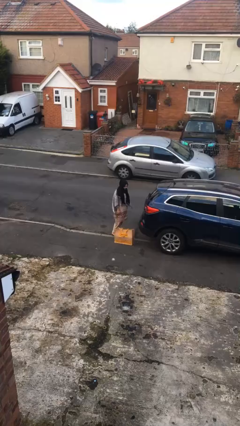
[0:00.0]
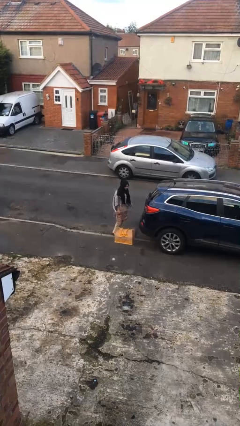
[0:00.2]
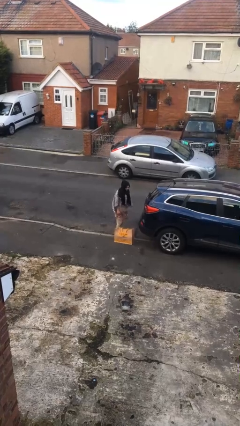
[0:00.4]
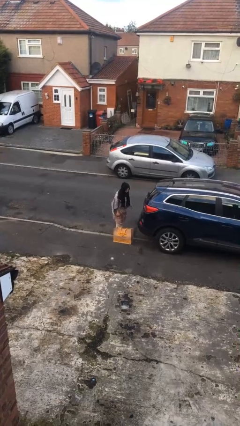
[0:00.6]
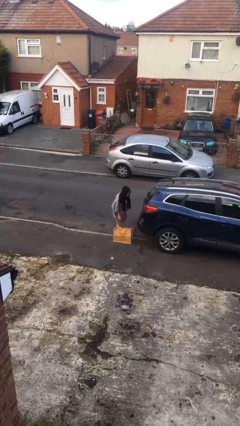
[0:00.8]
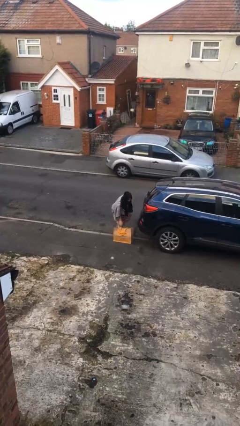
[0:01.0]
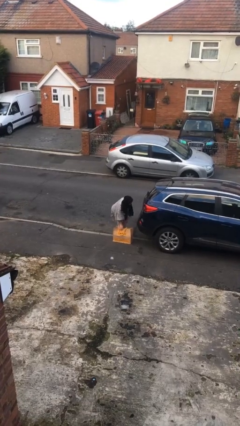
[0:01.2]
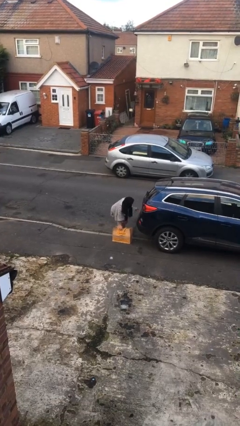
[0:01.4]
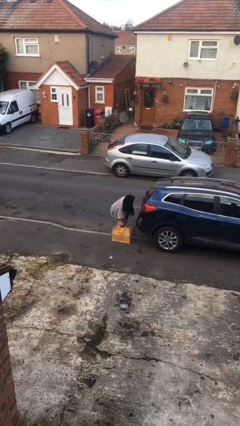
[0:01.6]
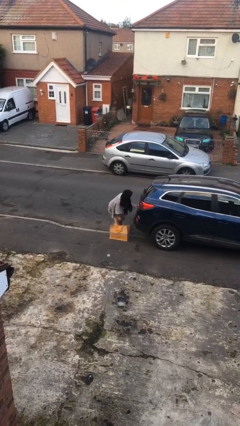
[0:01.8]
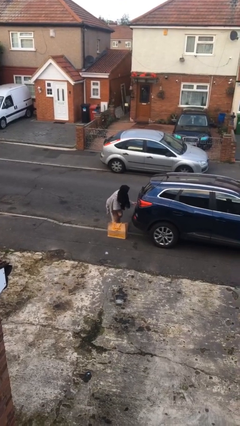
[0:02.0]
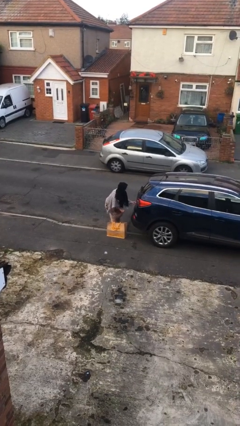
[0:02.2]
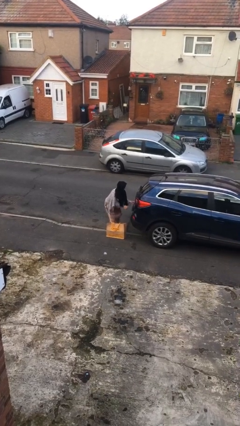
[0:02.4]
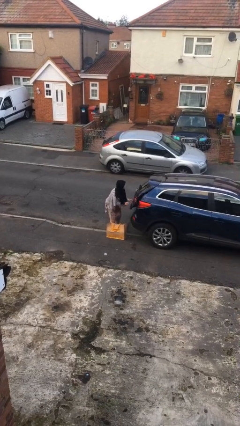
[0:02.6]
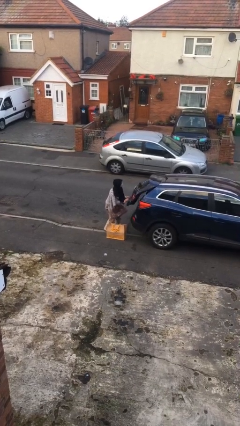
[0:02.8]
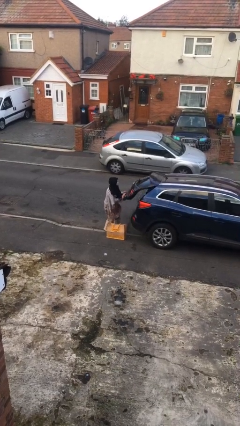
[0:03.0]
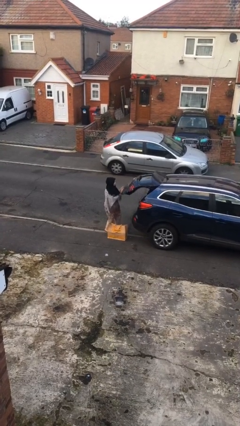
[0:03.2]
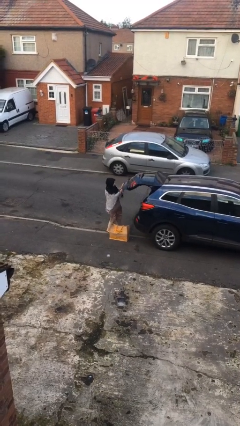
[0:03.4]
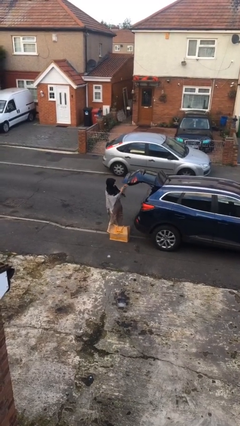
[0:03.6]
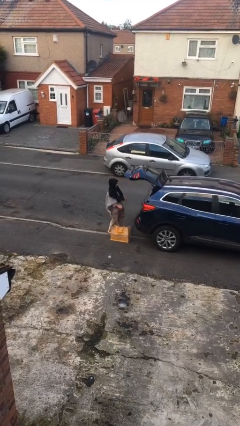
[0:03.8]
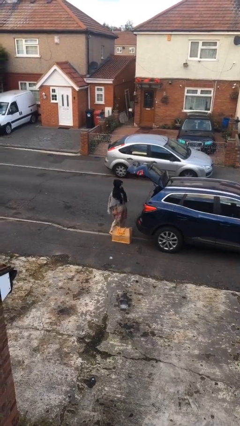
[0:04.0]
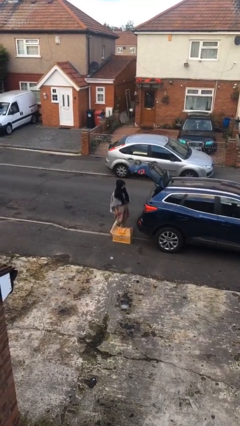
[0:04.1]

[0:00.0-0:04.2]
person opens car trunk

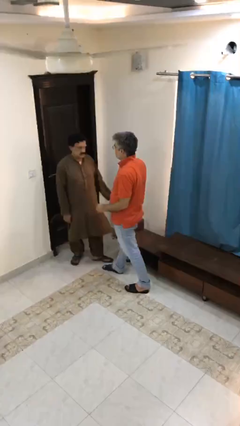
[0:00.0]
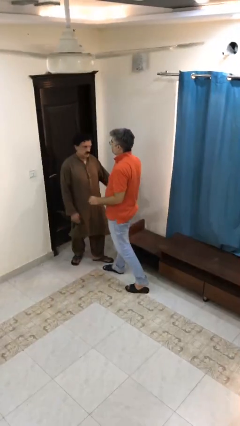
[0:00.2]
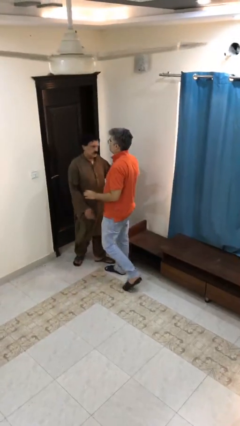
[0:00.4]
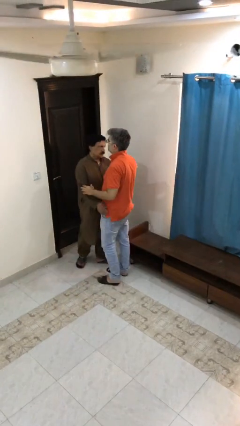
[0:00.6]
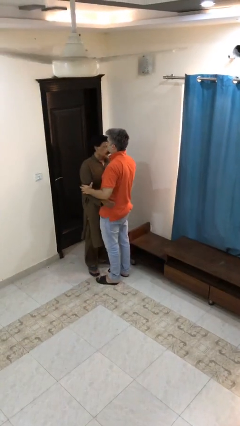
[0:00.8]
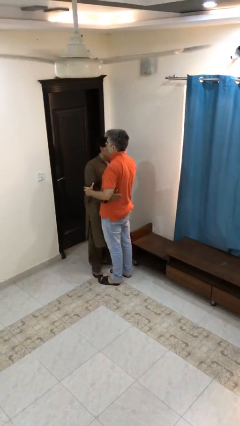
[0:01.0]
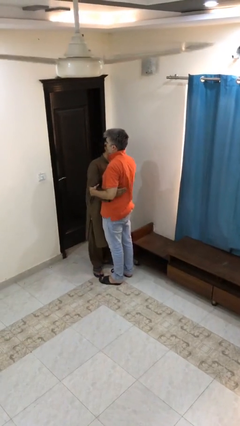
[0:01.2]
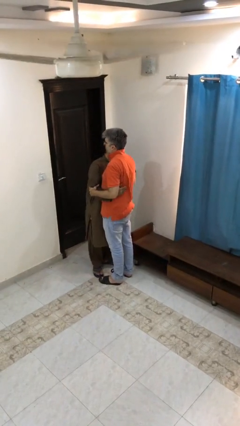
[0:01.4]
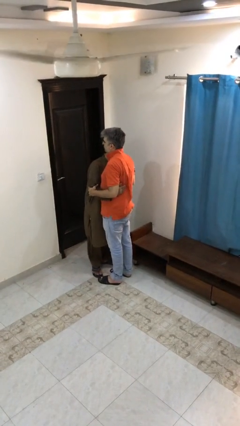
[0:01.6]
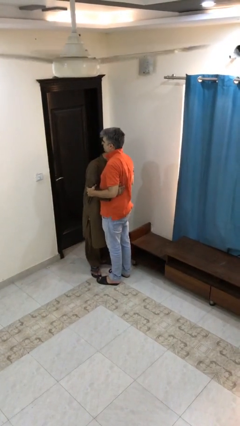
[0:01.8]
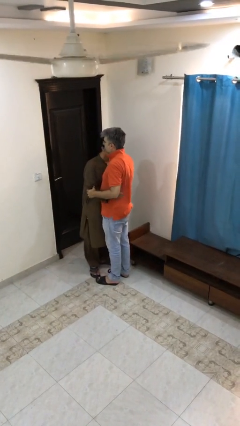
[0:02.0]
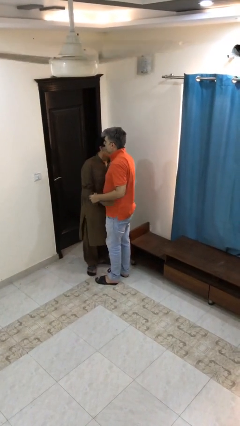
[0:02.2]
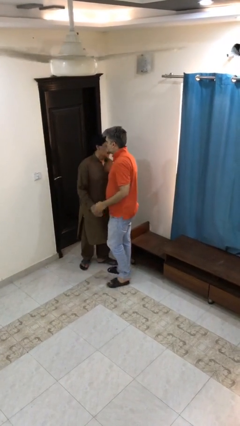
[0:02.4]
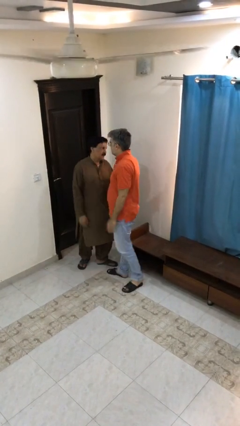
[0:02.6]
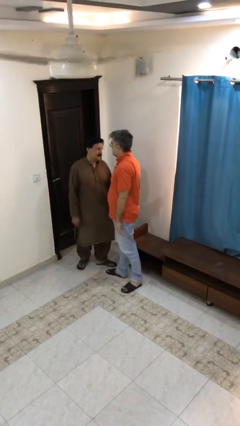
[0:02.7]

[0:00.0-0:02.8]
person embraces person

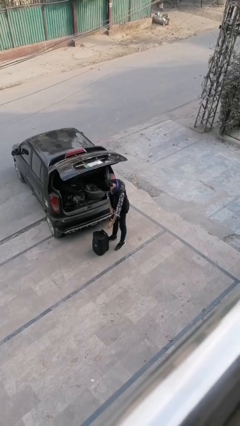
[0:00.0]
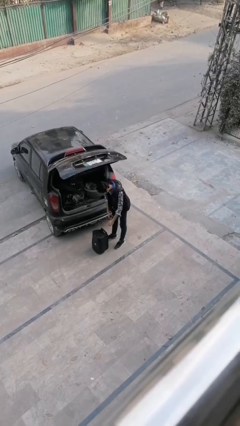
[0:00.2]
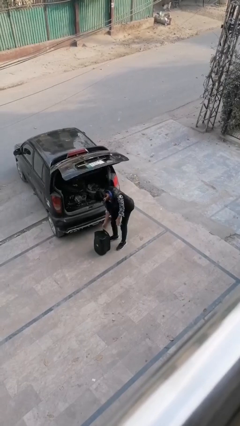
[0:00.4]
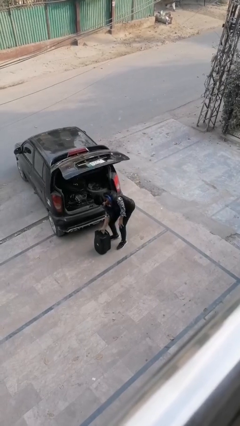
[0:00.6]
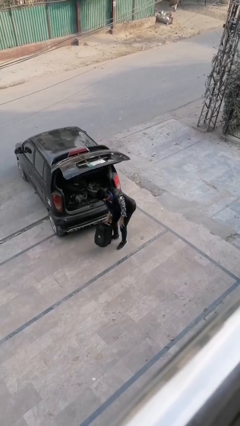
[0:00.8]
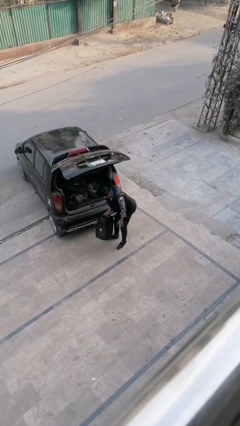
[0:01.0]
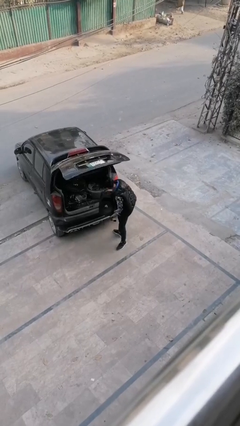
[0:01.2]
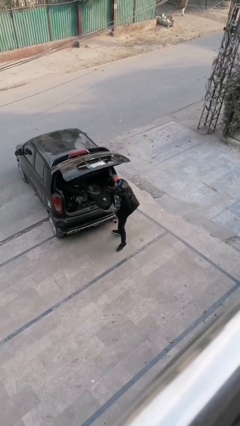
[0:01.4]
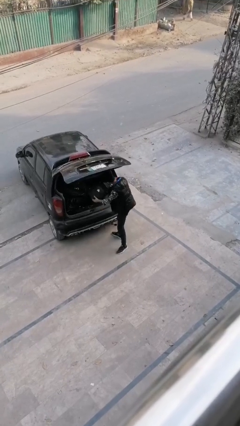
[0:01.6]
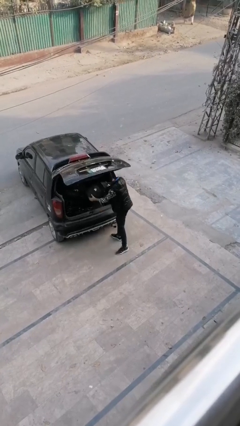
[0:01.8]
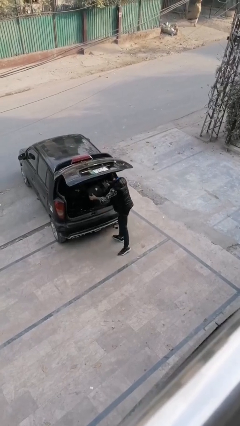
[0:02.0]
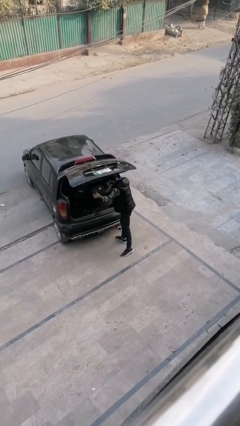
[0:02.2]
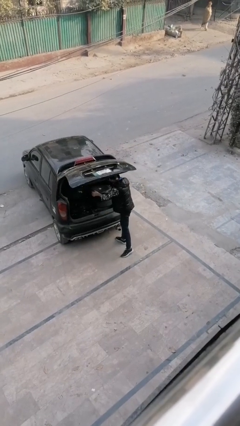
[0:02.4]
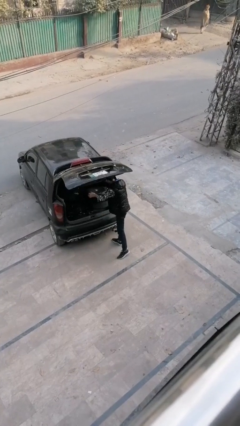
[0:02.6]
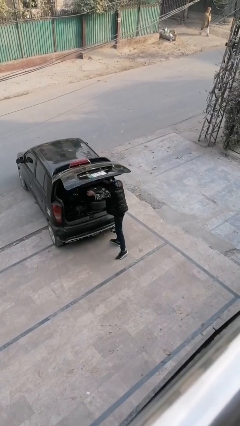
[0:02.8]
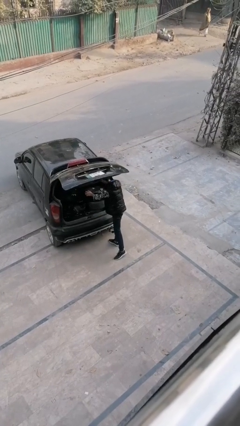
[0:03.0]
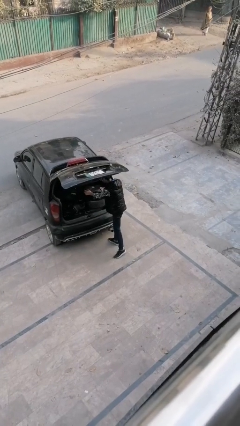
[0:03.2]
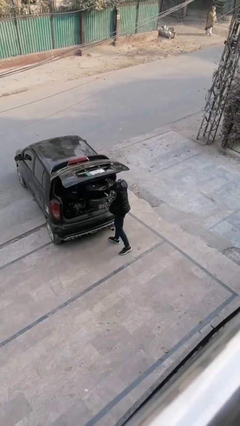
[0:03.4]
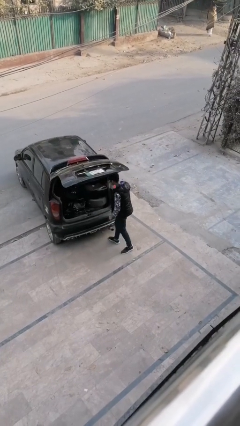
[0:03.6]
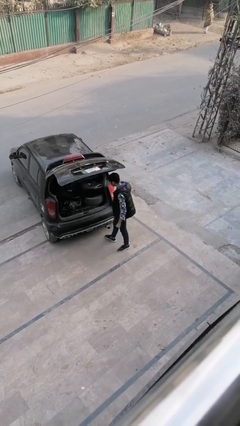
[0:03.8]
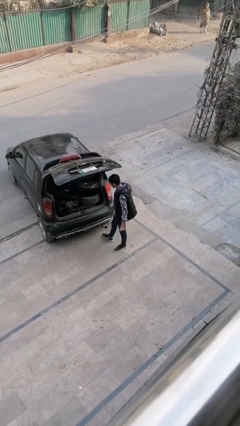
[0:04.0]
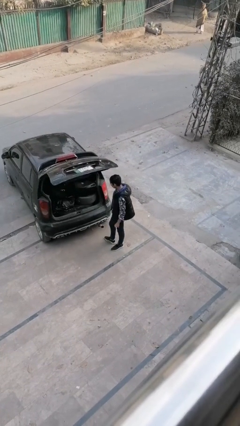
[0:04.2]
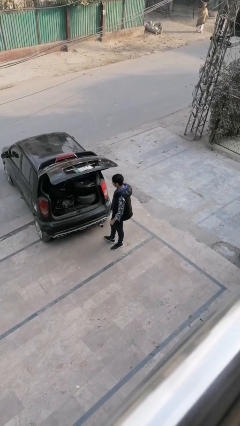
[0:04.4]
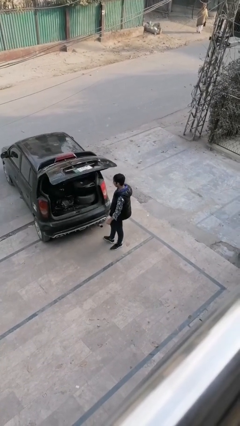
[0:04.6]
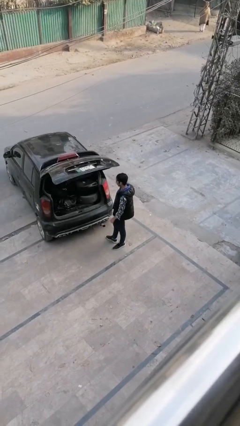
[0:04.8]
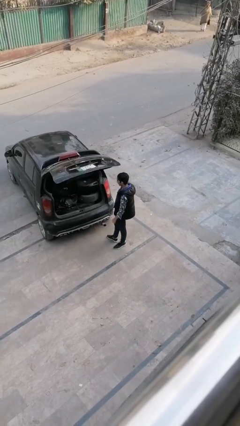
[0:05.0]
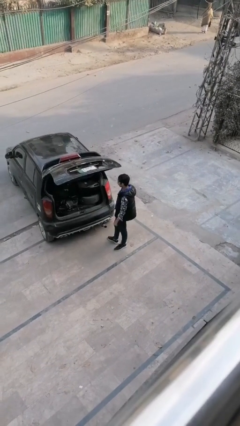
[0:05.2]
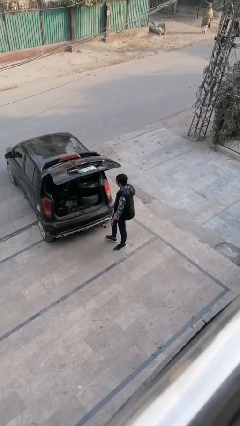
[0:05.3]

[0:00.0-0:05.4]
person loads car

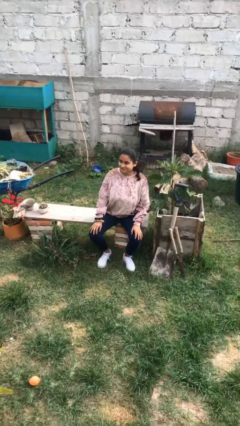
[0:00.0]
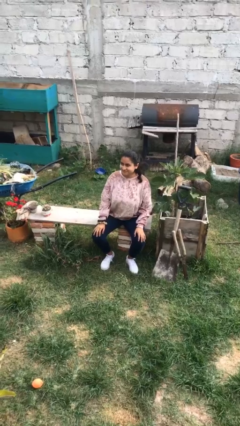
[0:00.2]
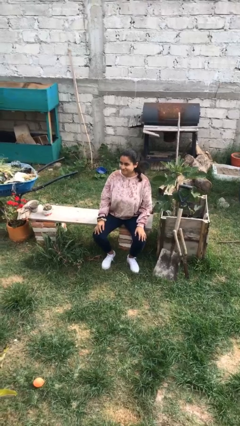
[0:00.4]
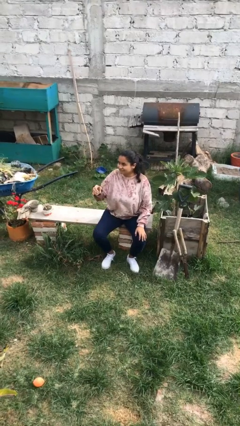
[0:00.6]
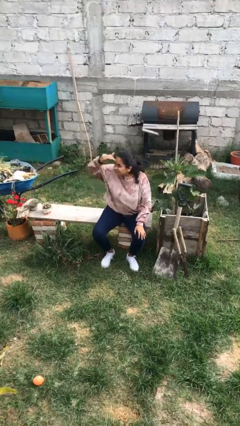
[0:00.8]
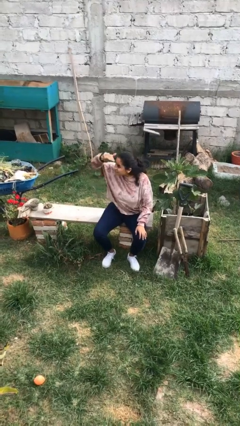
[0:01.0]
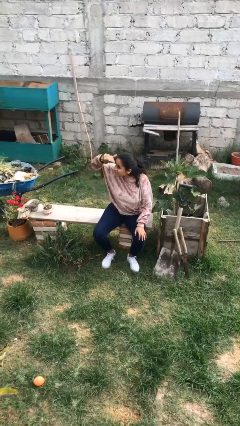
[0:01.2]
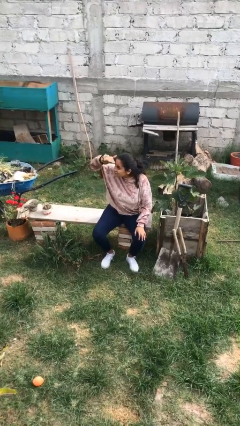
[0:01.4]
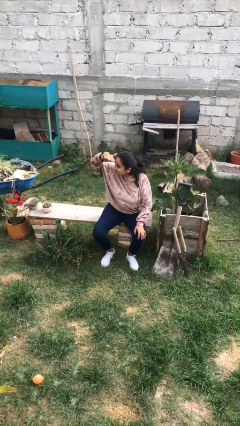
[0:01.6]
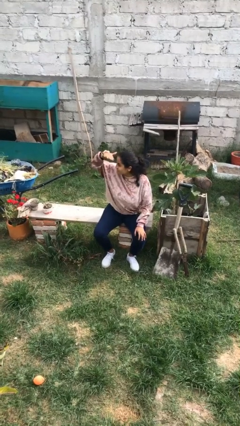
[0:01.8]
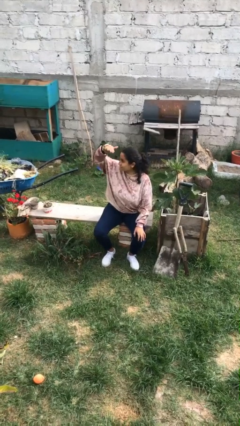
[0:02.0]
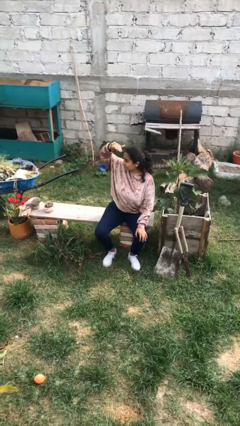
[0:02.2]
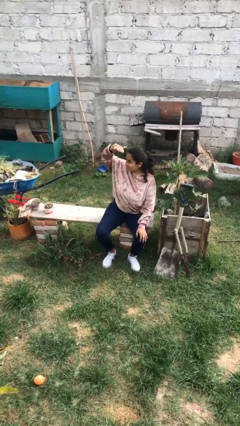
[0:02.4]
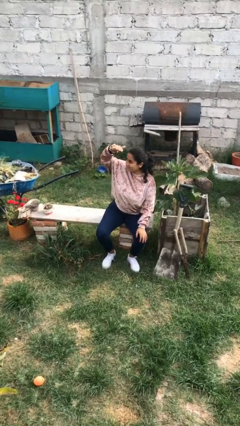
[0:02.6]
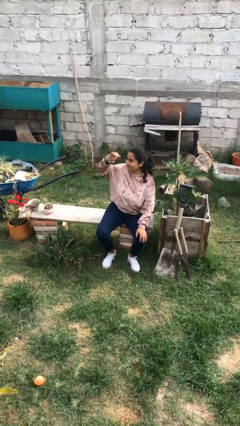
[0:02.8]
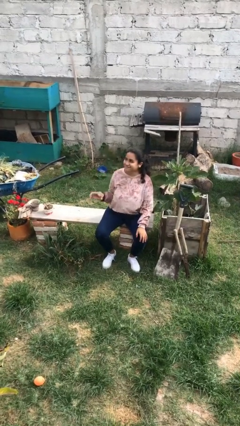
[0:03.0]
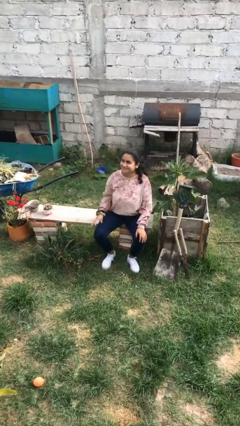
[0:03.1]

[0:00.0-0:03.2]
person shades eyes

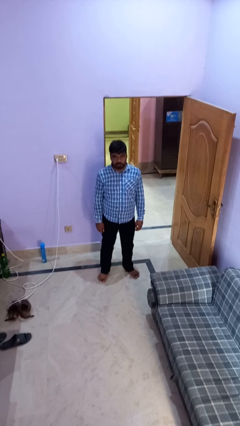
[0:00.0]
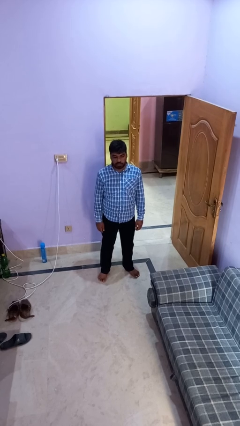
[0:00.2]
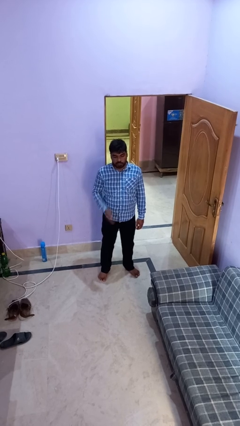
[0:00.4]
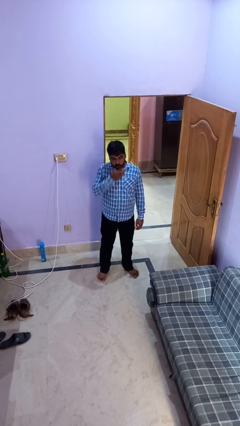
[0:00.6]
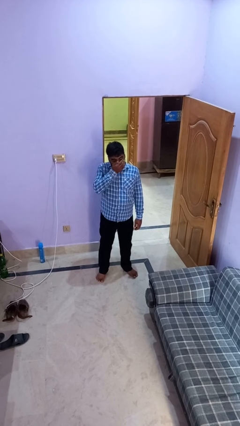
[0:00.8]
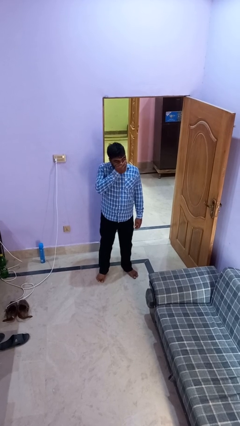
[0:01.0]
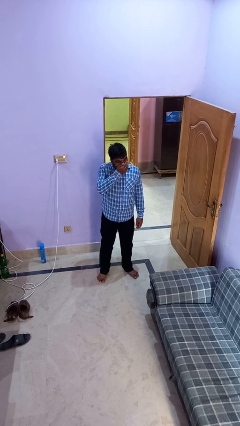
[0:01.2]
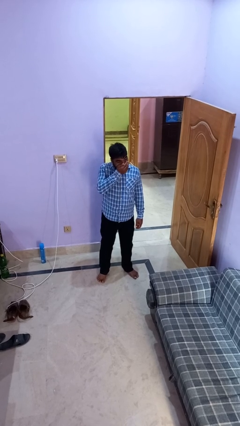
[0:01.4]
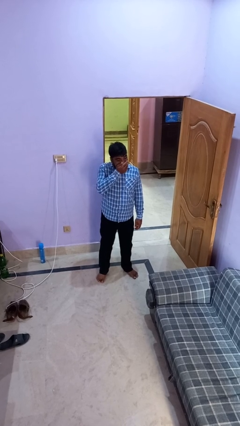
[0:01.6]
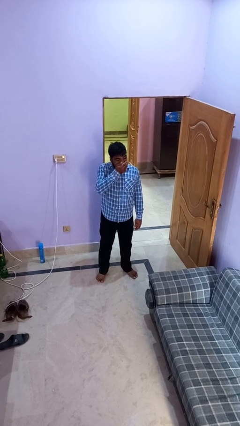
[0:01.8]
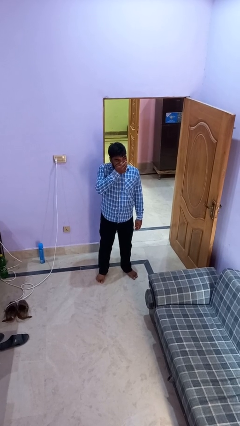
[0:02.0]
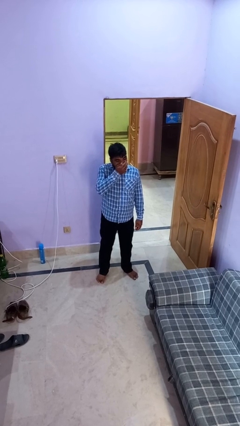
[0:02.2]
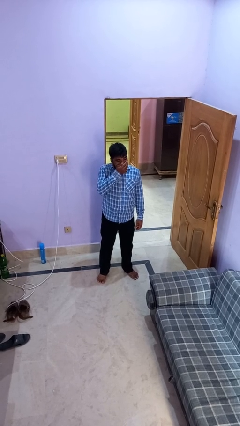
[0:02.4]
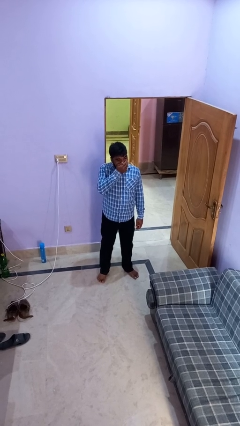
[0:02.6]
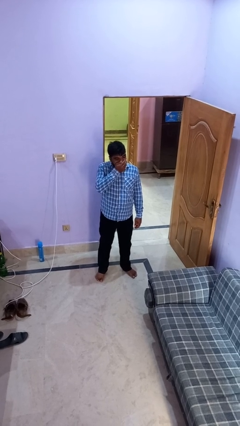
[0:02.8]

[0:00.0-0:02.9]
person sneezes into hand
